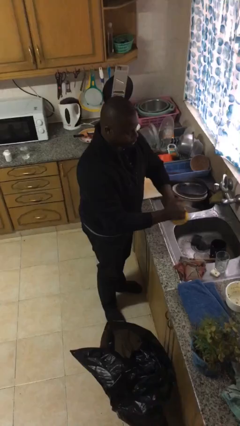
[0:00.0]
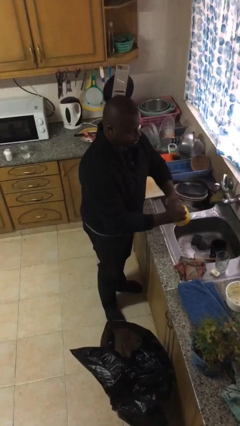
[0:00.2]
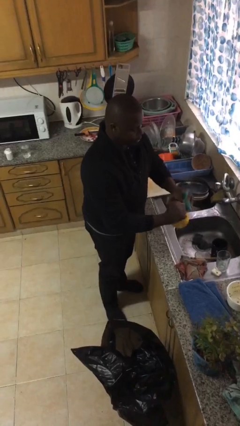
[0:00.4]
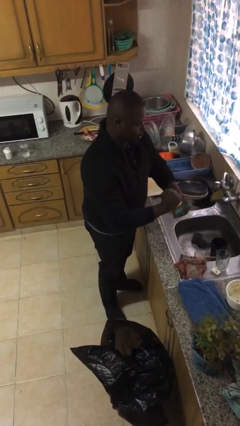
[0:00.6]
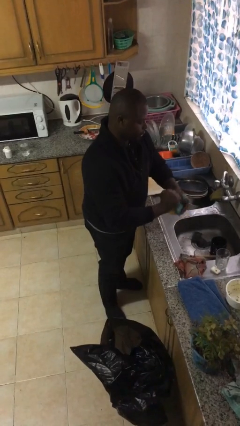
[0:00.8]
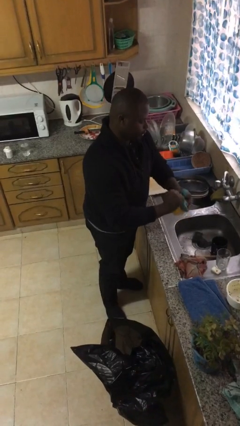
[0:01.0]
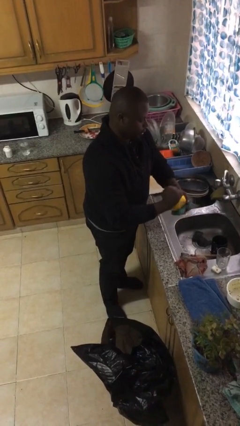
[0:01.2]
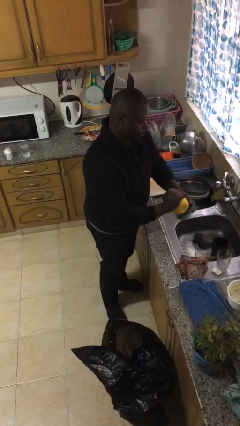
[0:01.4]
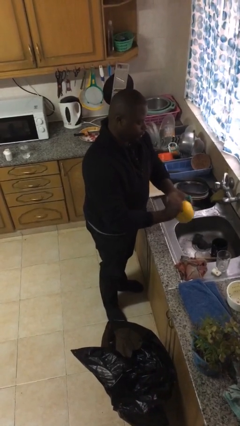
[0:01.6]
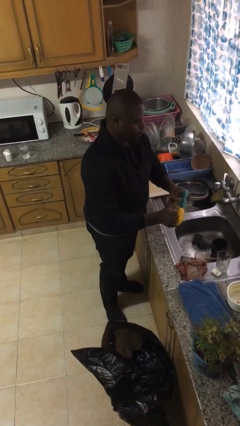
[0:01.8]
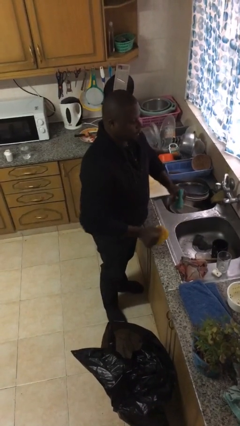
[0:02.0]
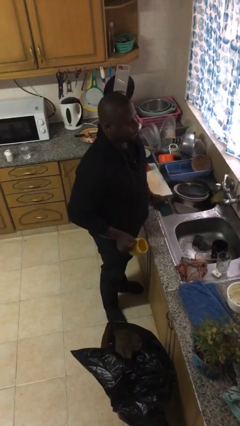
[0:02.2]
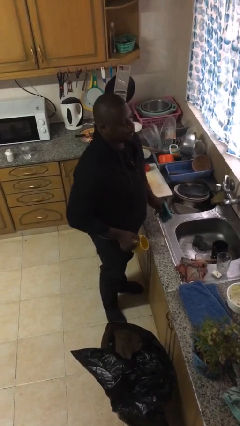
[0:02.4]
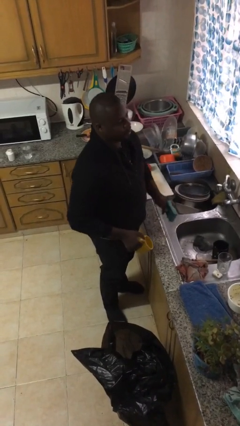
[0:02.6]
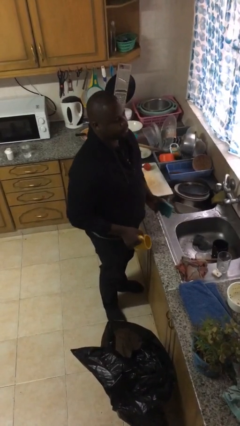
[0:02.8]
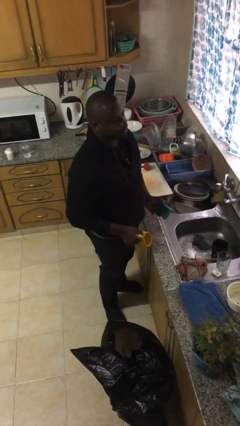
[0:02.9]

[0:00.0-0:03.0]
person washes dish

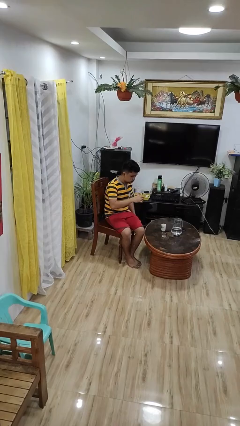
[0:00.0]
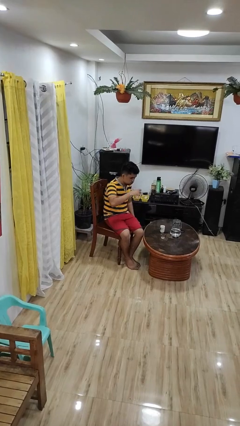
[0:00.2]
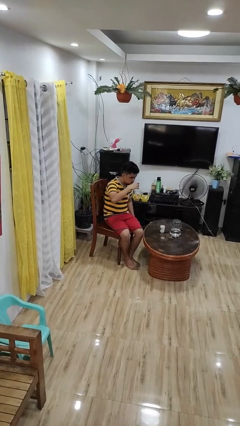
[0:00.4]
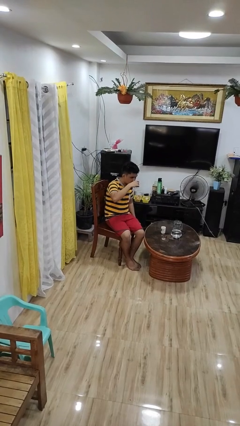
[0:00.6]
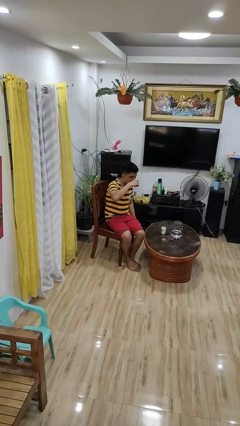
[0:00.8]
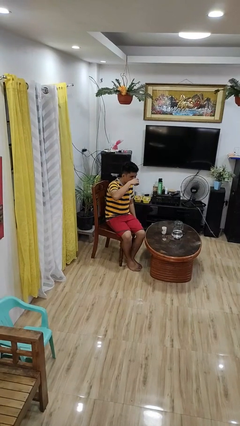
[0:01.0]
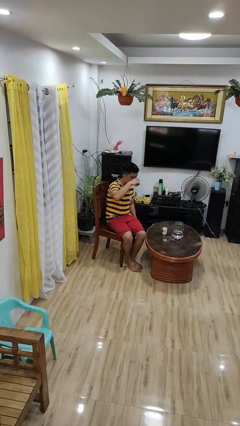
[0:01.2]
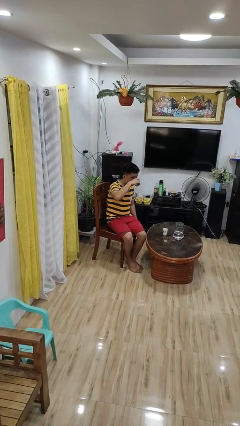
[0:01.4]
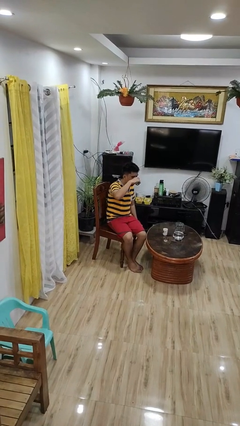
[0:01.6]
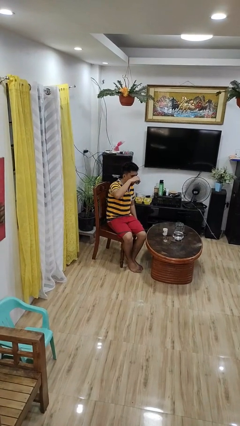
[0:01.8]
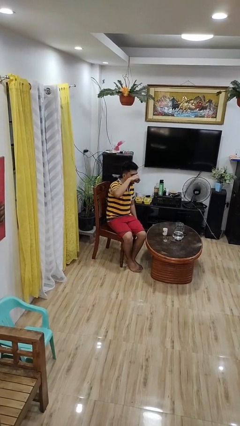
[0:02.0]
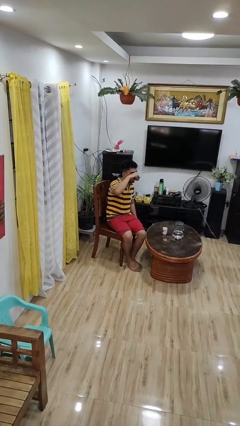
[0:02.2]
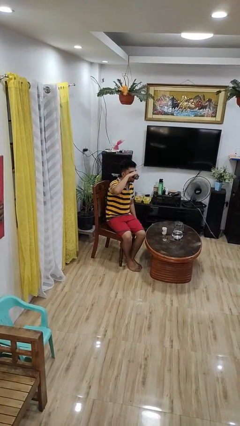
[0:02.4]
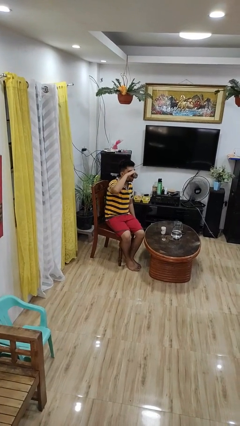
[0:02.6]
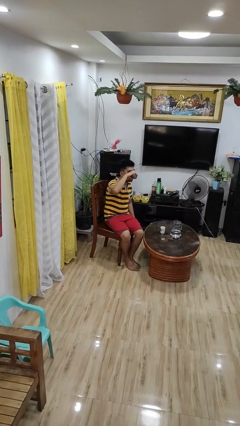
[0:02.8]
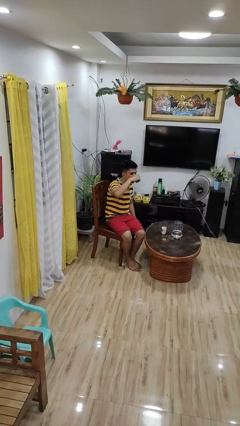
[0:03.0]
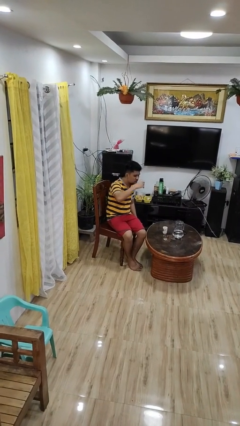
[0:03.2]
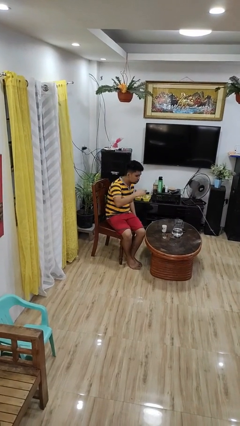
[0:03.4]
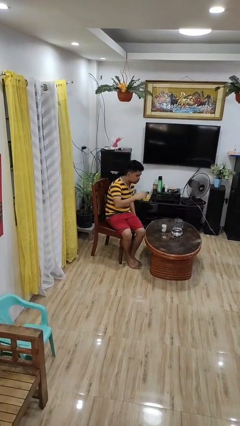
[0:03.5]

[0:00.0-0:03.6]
person drinks from shotglass

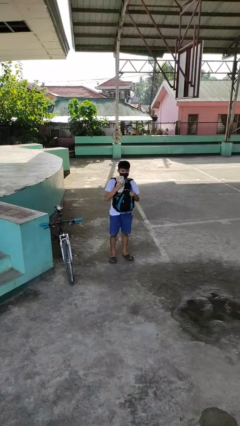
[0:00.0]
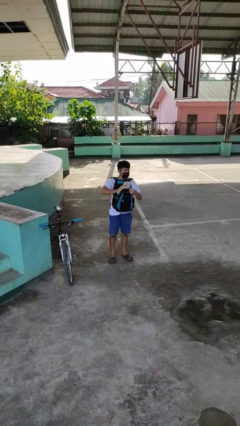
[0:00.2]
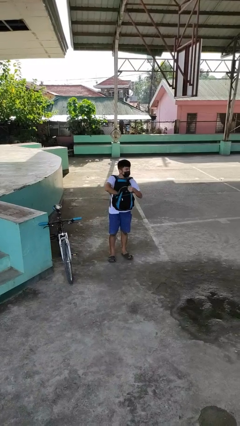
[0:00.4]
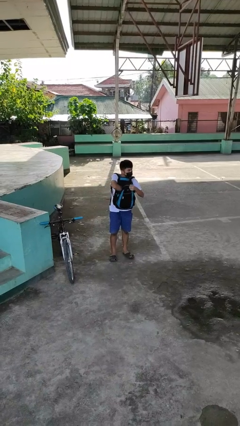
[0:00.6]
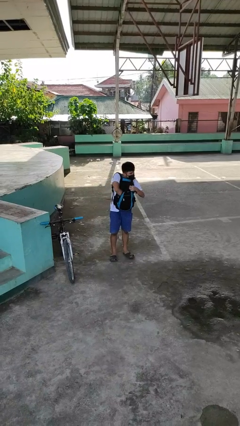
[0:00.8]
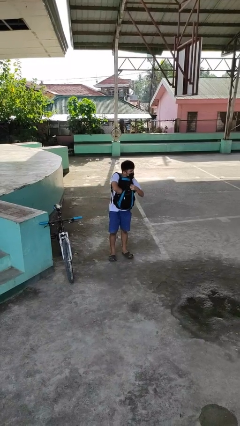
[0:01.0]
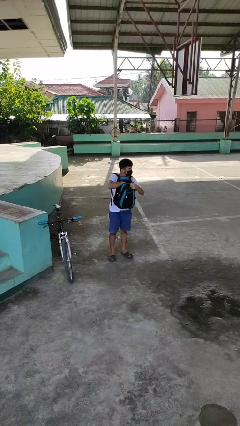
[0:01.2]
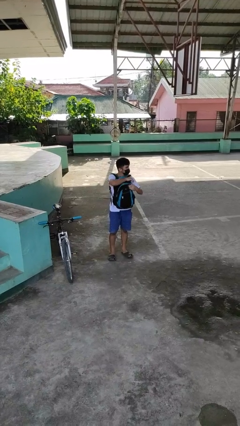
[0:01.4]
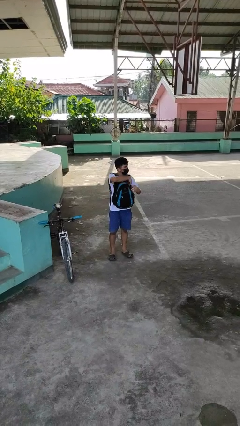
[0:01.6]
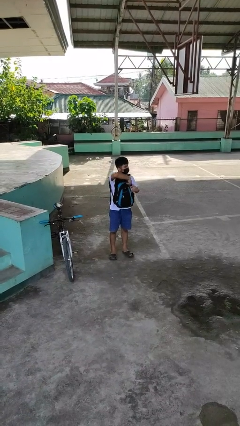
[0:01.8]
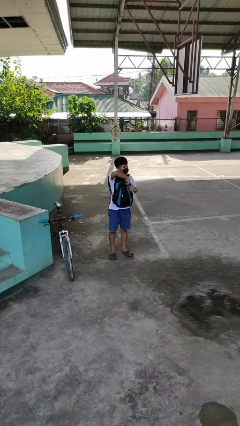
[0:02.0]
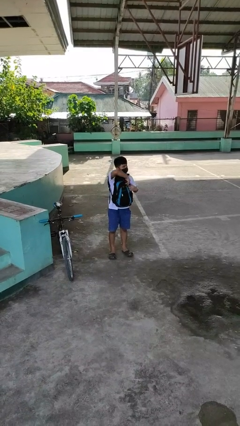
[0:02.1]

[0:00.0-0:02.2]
person puts object into backpack

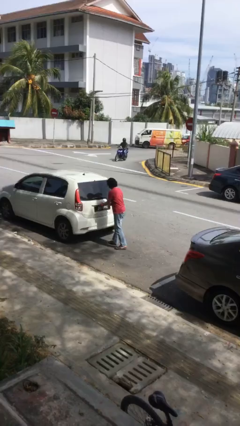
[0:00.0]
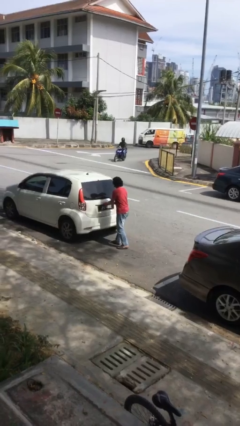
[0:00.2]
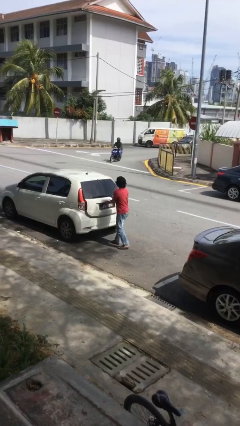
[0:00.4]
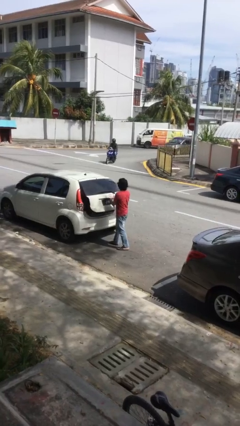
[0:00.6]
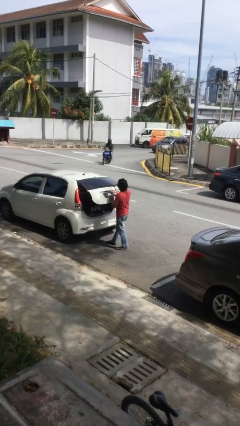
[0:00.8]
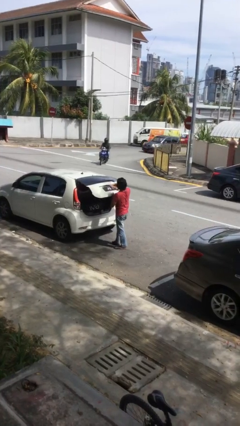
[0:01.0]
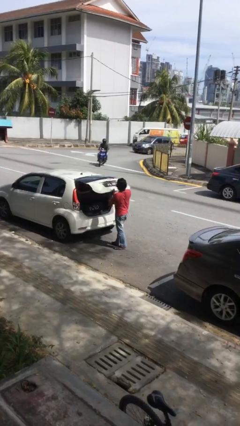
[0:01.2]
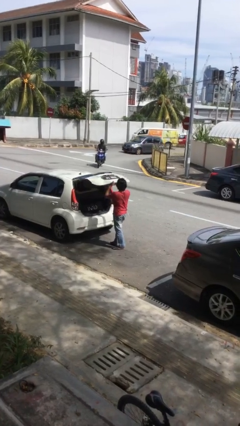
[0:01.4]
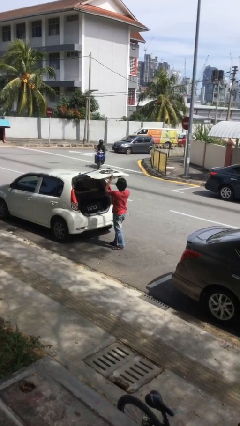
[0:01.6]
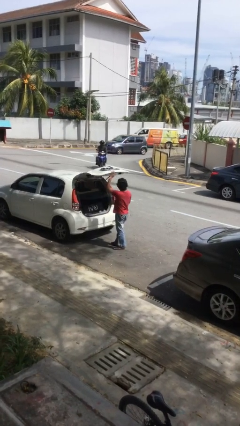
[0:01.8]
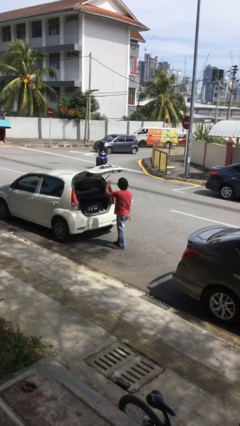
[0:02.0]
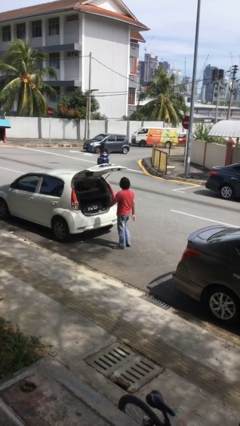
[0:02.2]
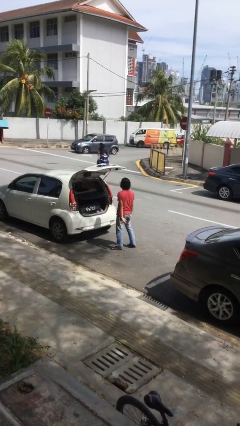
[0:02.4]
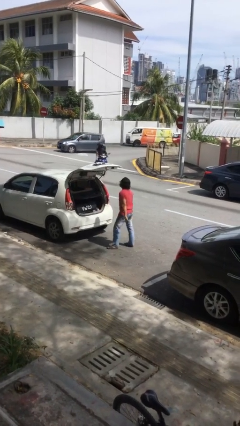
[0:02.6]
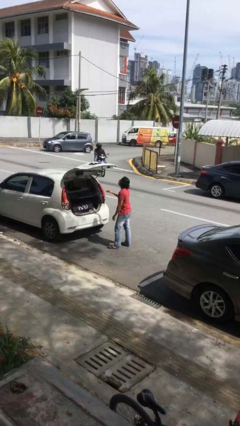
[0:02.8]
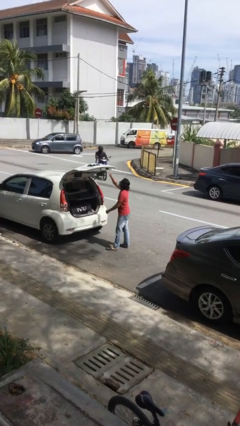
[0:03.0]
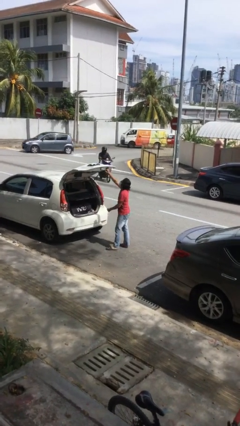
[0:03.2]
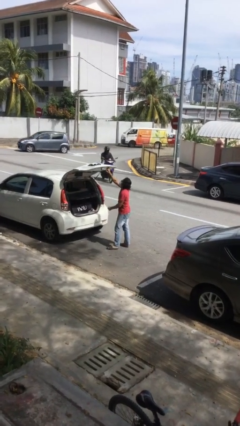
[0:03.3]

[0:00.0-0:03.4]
person opens car trunk

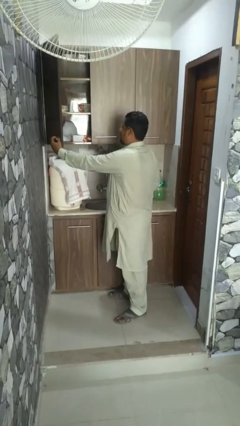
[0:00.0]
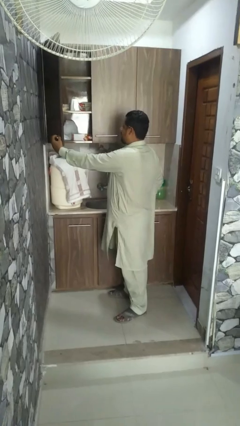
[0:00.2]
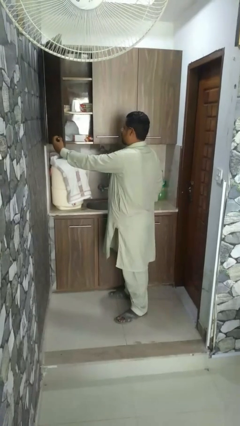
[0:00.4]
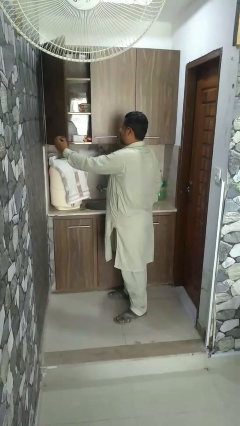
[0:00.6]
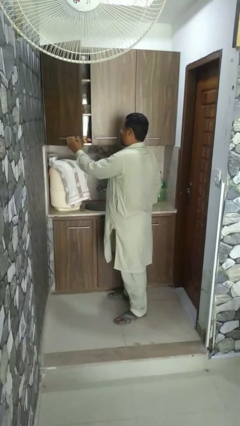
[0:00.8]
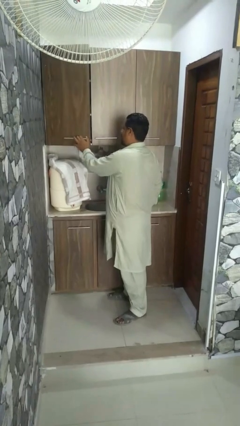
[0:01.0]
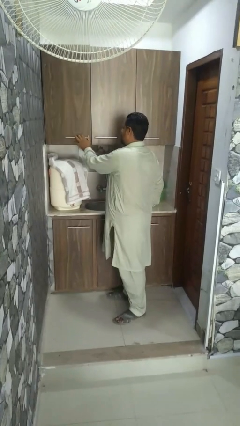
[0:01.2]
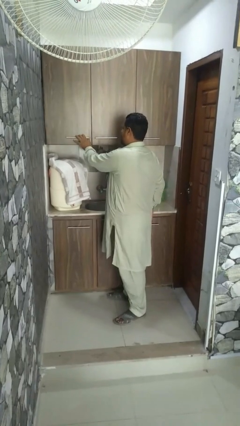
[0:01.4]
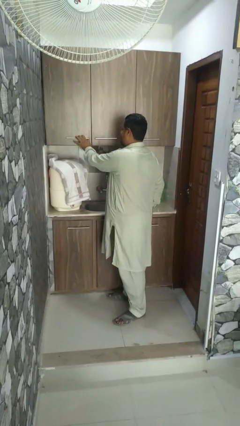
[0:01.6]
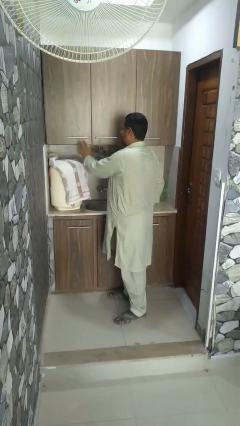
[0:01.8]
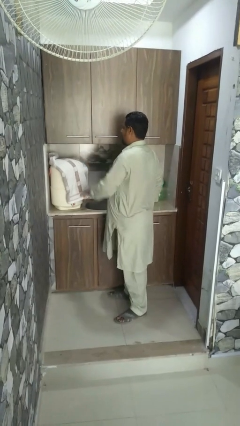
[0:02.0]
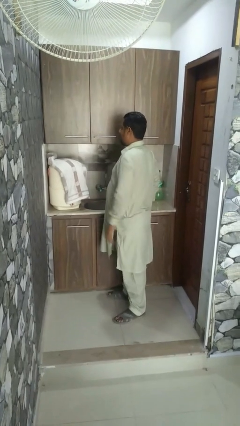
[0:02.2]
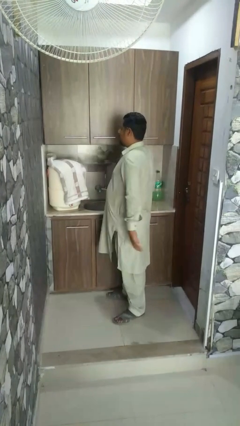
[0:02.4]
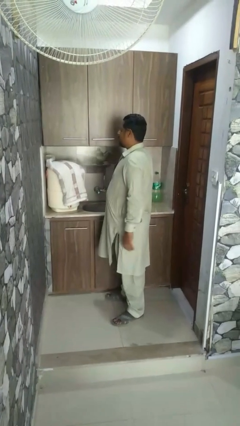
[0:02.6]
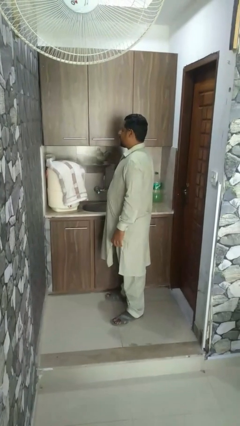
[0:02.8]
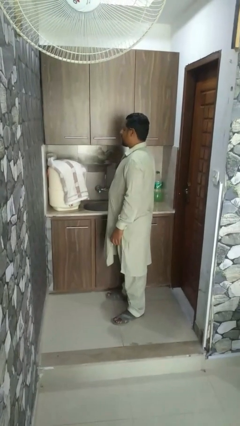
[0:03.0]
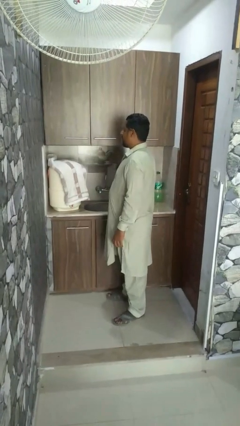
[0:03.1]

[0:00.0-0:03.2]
person closes microwave

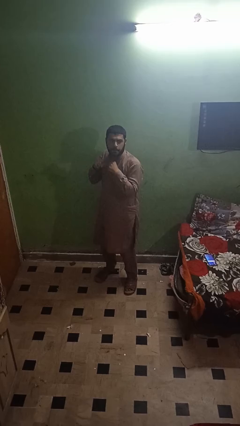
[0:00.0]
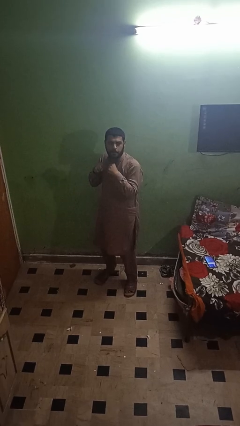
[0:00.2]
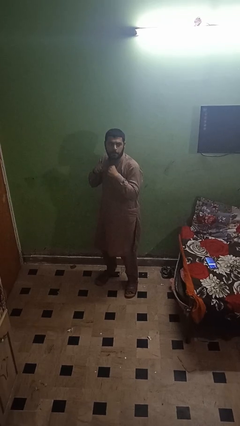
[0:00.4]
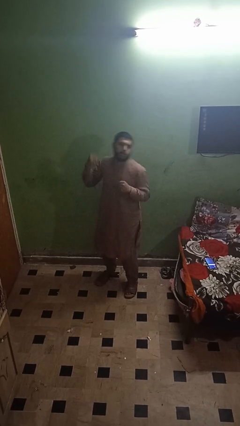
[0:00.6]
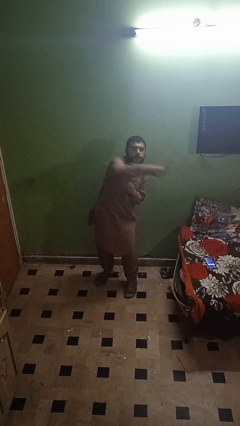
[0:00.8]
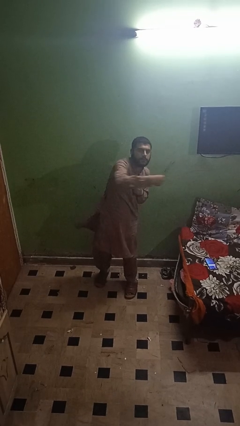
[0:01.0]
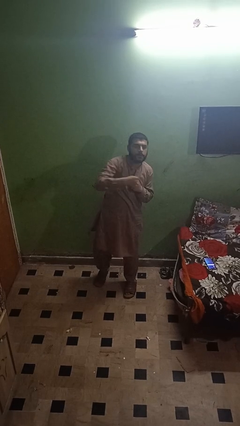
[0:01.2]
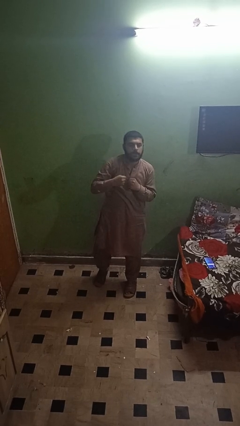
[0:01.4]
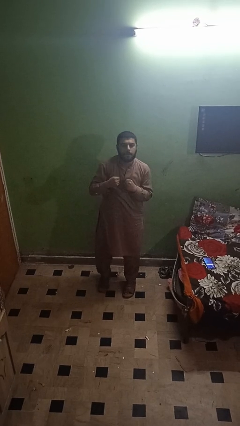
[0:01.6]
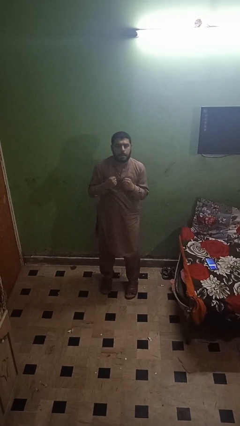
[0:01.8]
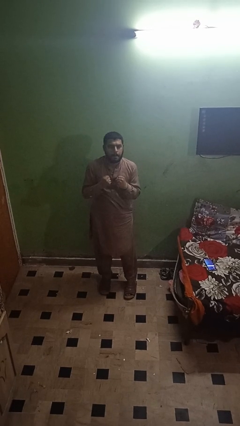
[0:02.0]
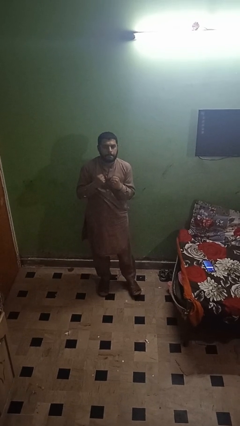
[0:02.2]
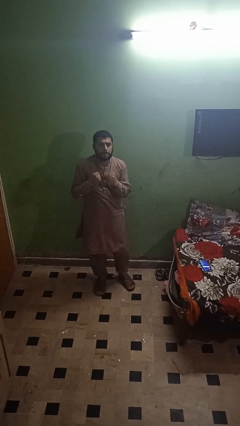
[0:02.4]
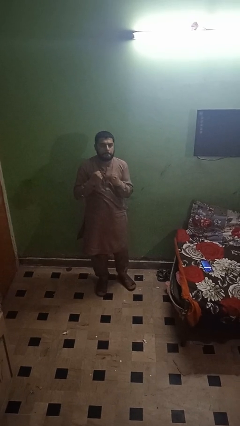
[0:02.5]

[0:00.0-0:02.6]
person punches
